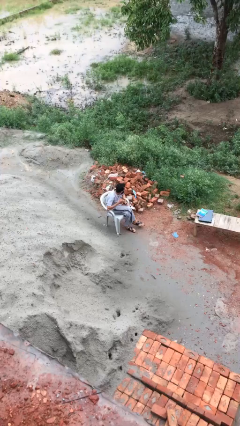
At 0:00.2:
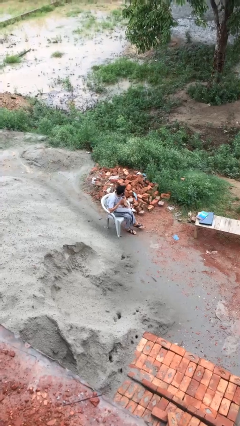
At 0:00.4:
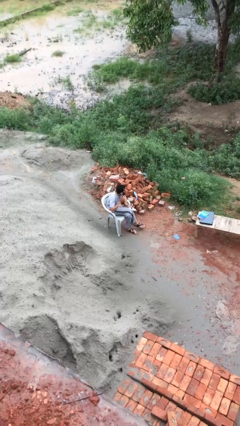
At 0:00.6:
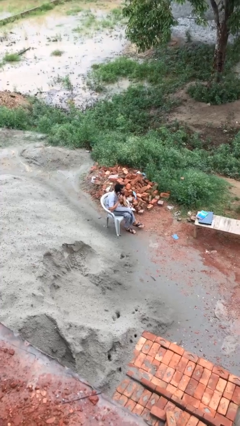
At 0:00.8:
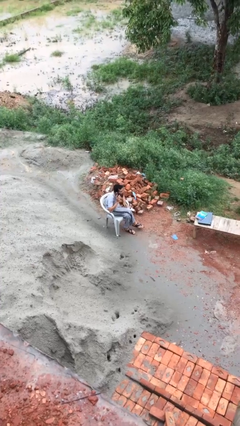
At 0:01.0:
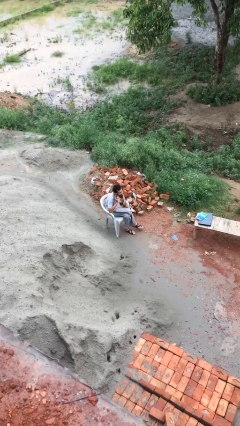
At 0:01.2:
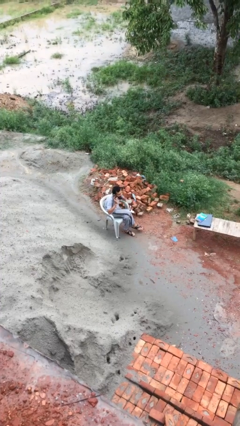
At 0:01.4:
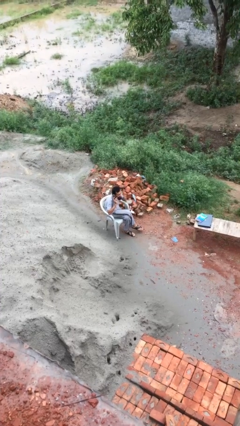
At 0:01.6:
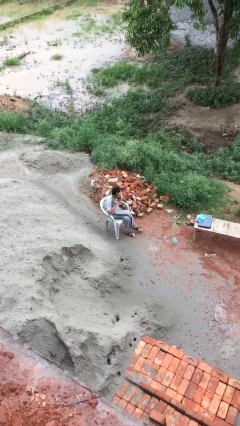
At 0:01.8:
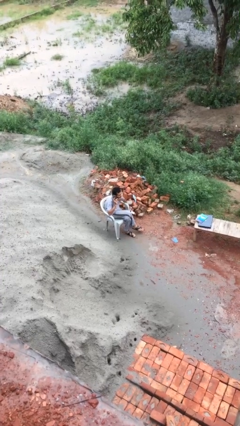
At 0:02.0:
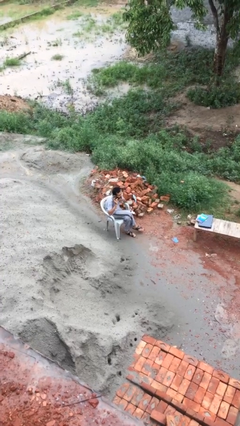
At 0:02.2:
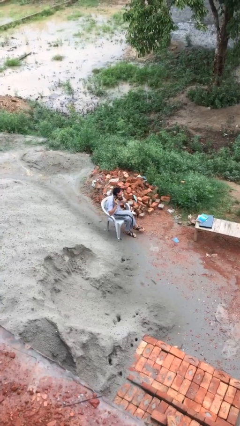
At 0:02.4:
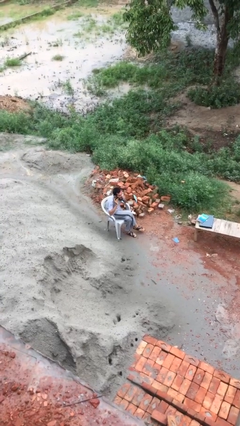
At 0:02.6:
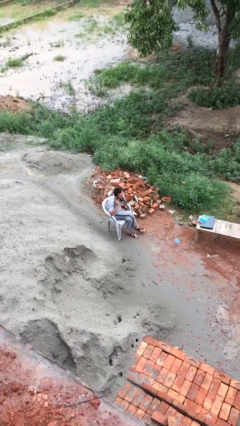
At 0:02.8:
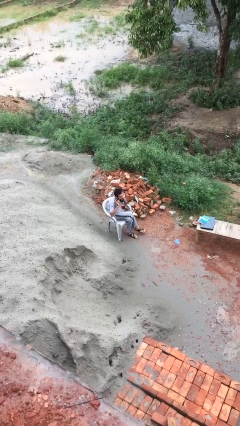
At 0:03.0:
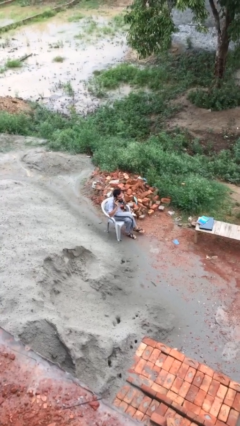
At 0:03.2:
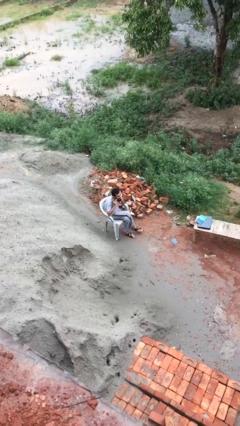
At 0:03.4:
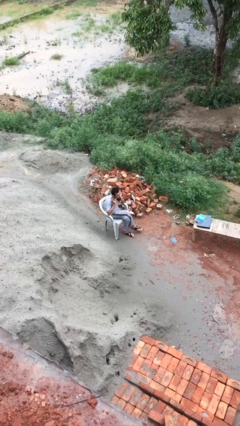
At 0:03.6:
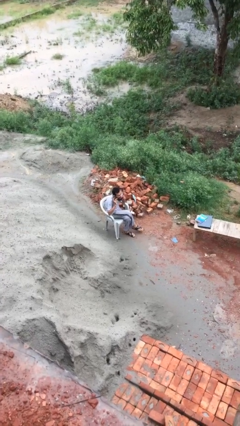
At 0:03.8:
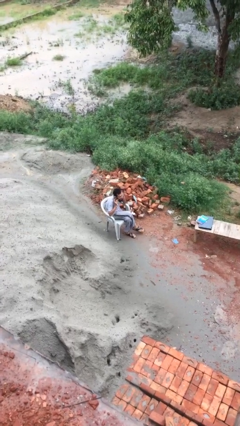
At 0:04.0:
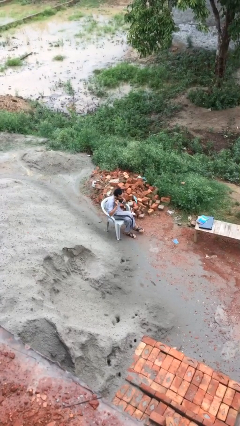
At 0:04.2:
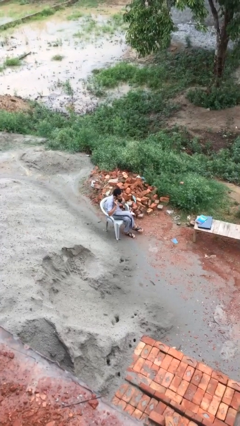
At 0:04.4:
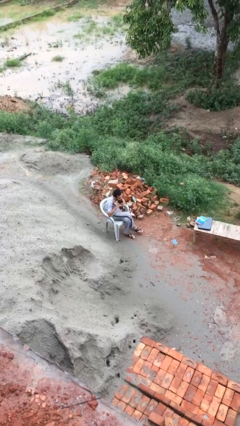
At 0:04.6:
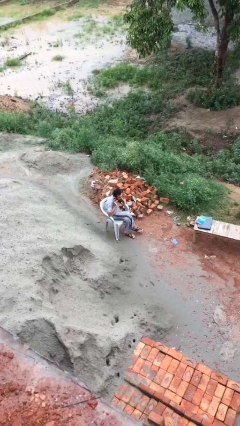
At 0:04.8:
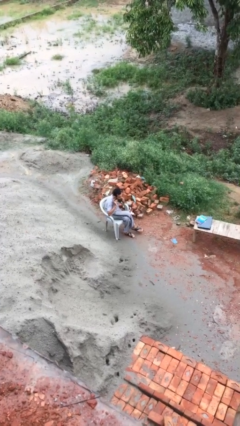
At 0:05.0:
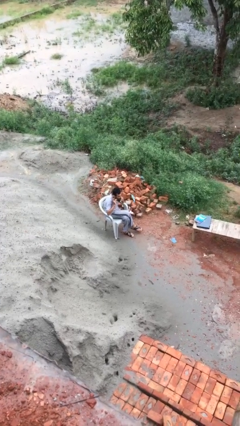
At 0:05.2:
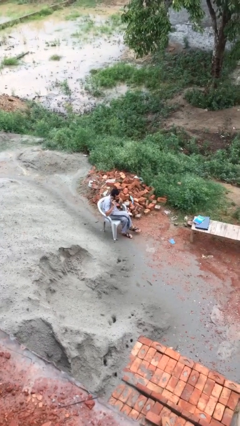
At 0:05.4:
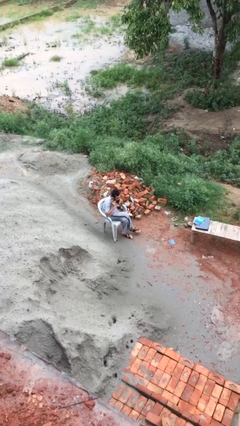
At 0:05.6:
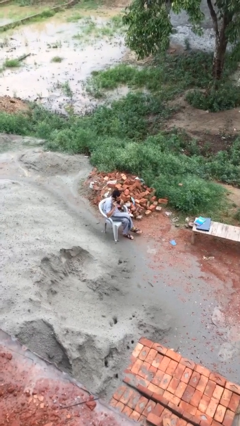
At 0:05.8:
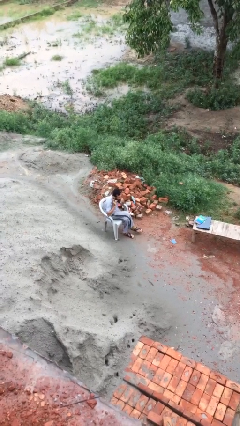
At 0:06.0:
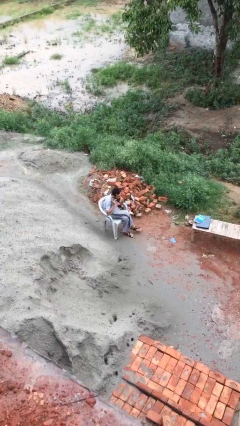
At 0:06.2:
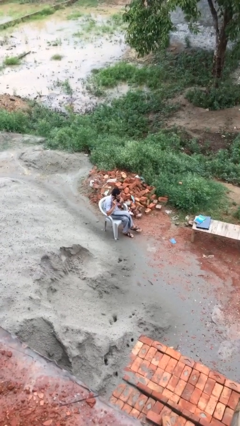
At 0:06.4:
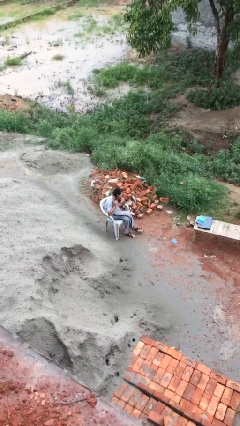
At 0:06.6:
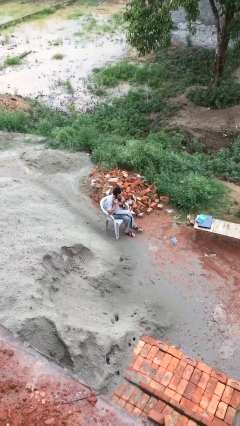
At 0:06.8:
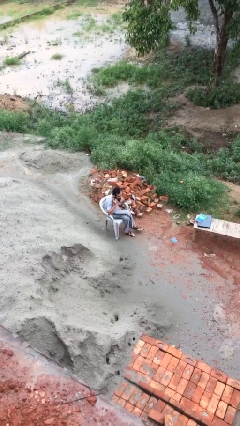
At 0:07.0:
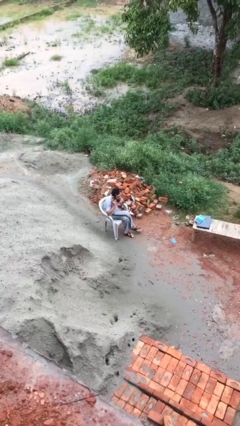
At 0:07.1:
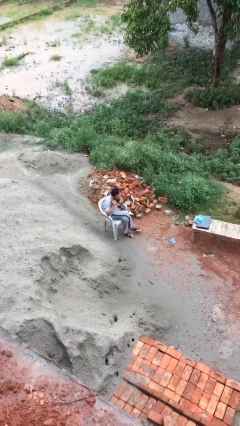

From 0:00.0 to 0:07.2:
person talks on phone

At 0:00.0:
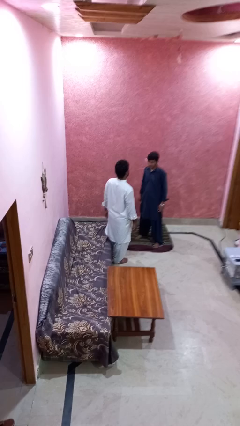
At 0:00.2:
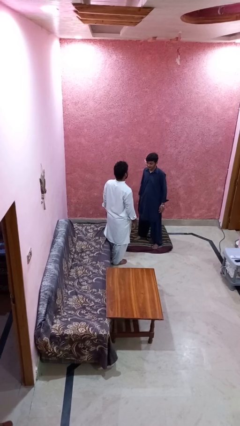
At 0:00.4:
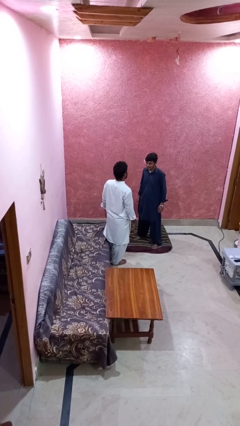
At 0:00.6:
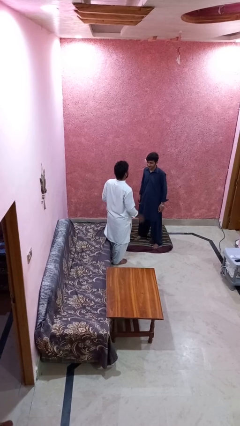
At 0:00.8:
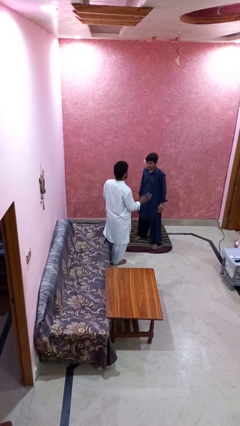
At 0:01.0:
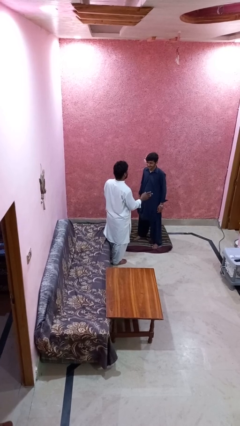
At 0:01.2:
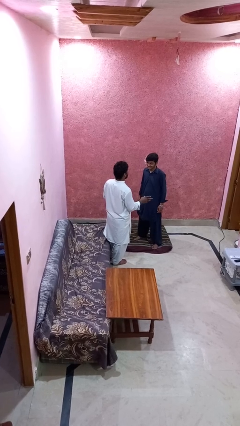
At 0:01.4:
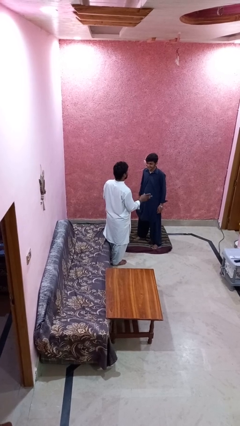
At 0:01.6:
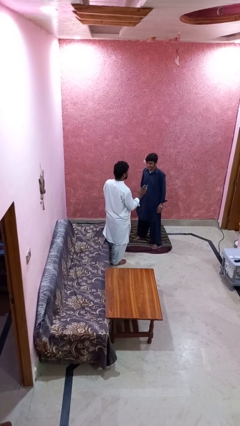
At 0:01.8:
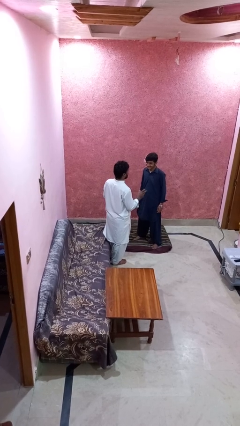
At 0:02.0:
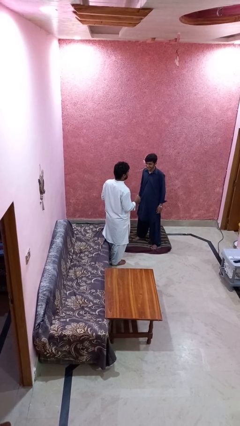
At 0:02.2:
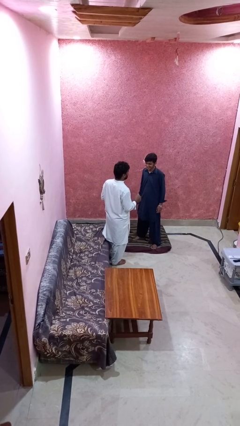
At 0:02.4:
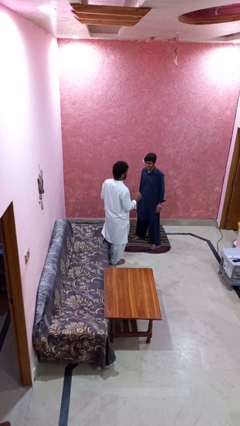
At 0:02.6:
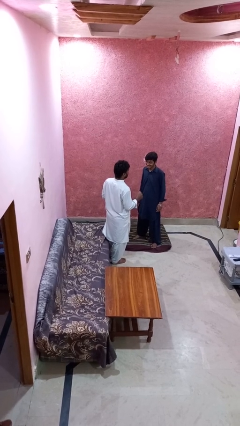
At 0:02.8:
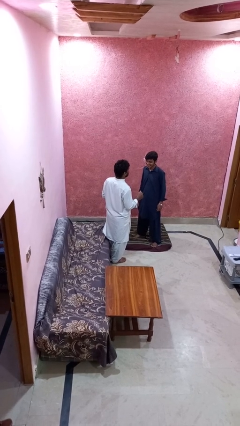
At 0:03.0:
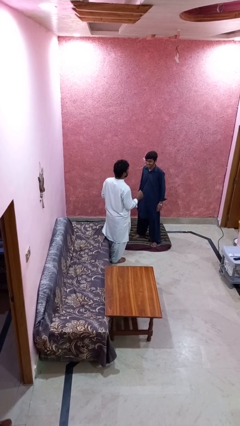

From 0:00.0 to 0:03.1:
person laughs with person

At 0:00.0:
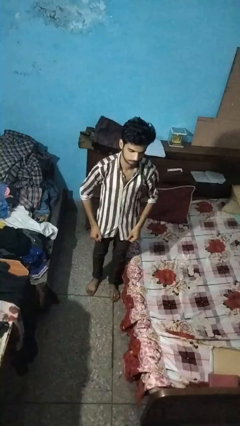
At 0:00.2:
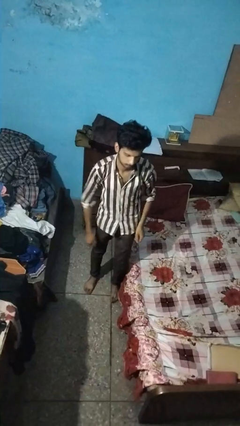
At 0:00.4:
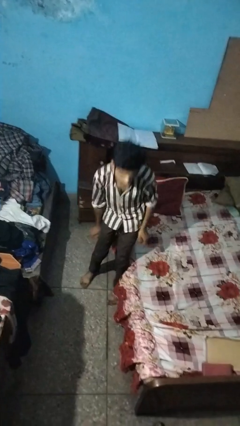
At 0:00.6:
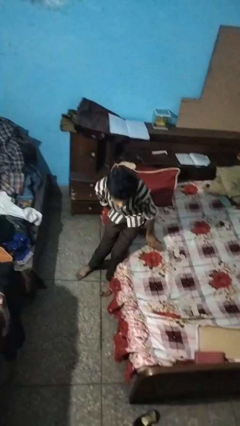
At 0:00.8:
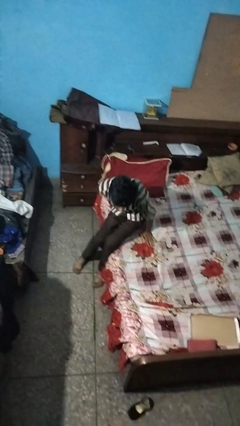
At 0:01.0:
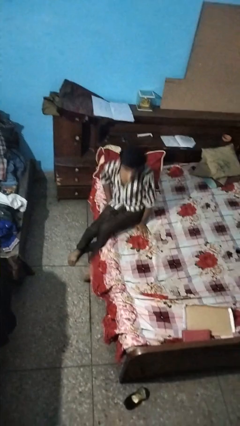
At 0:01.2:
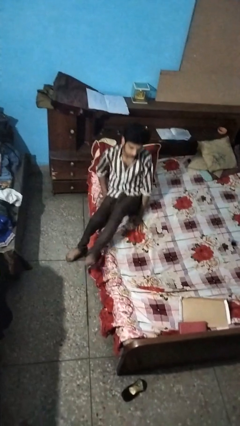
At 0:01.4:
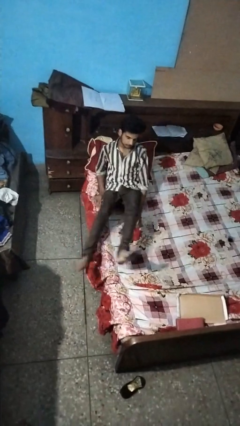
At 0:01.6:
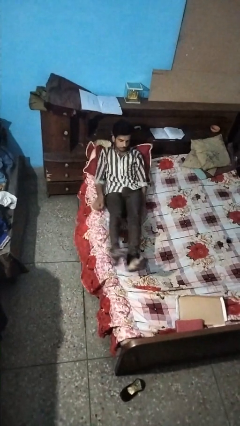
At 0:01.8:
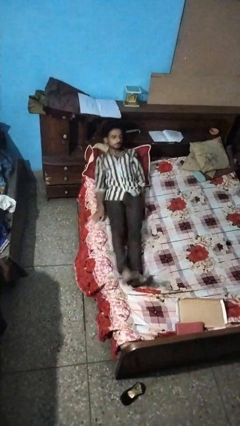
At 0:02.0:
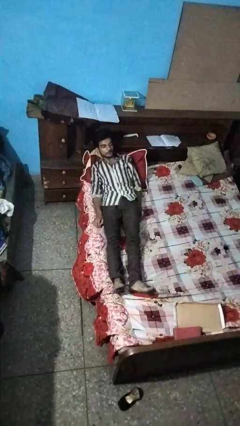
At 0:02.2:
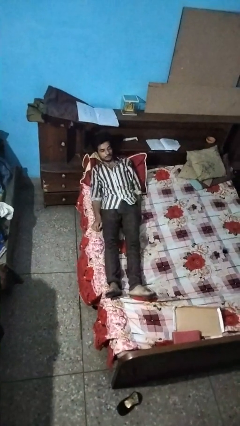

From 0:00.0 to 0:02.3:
person lies down on bed

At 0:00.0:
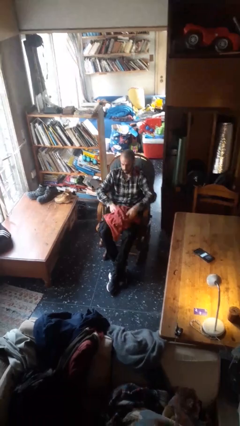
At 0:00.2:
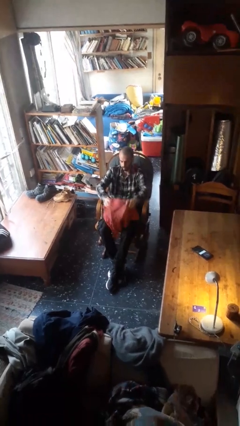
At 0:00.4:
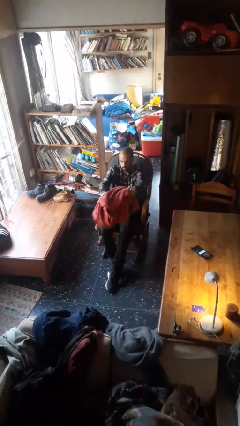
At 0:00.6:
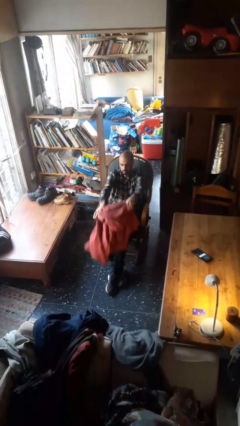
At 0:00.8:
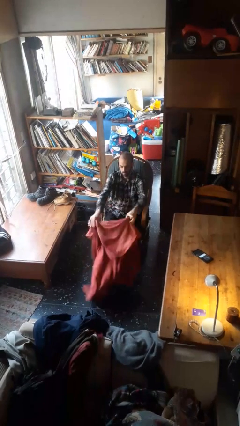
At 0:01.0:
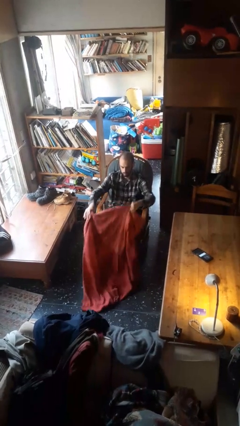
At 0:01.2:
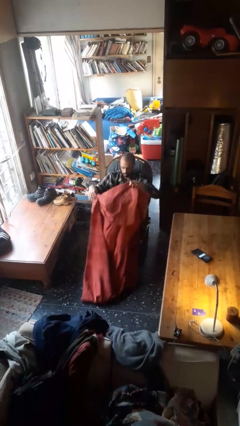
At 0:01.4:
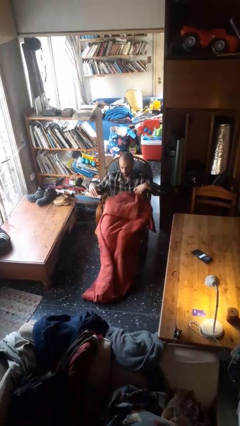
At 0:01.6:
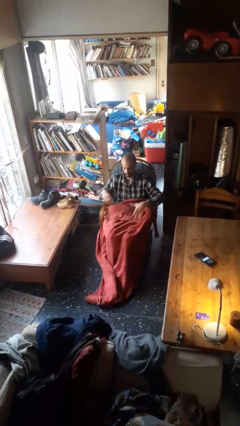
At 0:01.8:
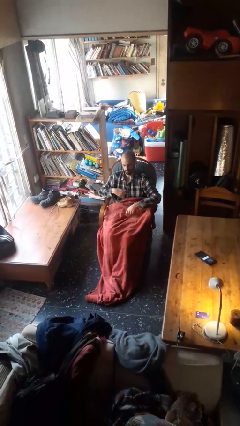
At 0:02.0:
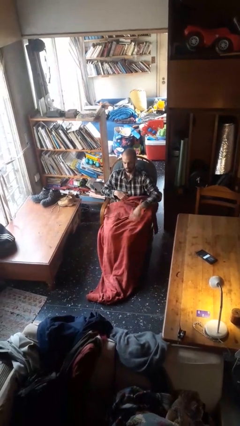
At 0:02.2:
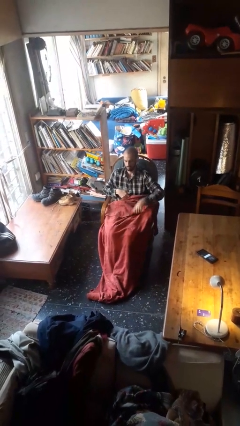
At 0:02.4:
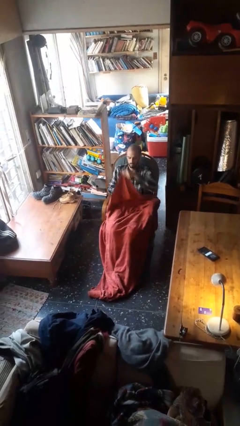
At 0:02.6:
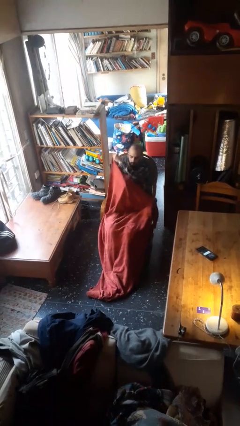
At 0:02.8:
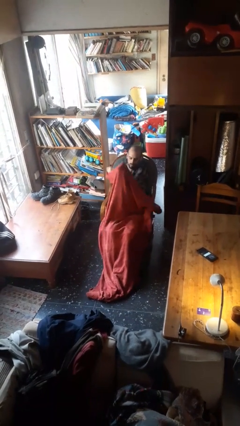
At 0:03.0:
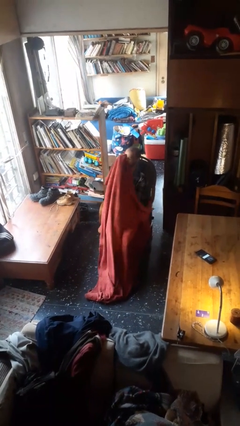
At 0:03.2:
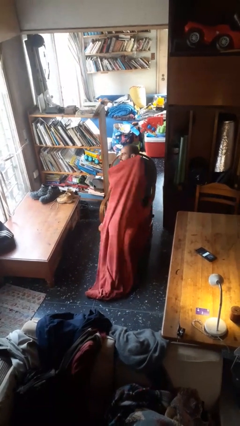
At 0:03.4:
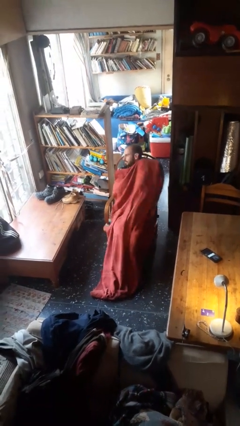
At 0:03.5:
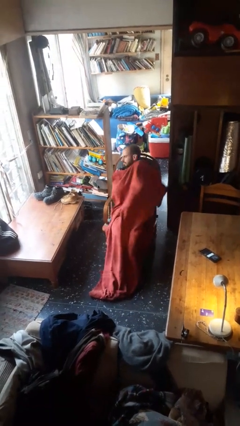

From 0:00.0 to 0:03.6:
person covers with blanket

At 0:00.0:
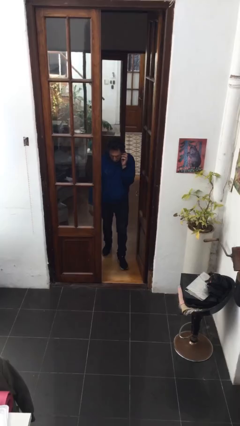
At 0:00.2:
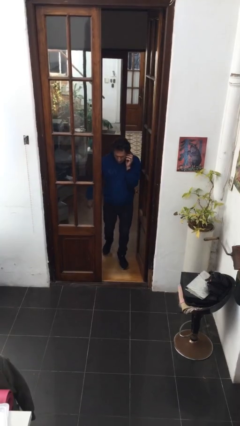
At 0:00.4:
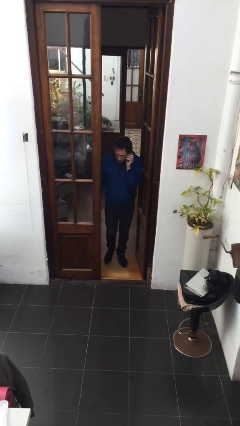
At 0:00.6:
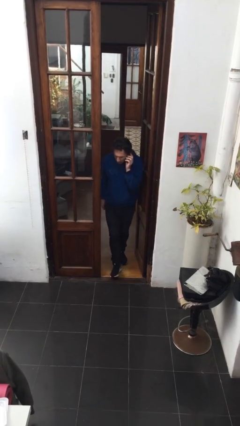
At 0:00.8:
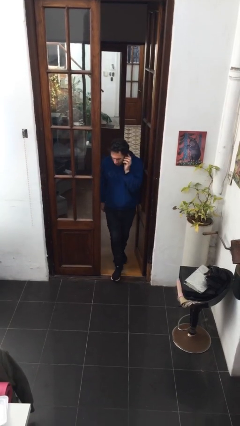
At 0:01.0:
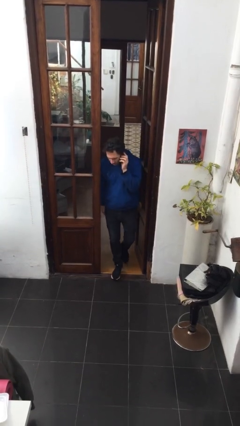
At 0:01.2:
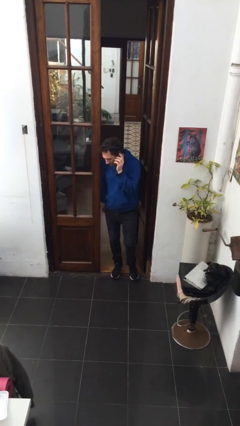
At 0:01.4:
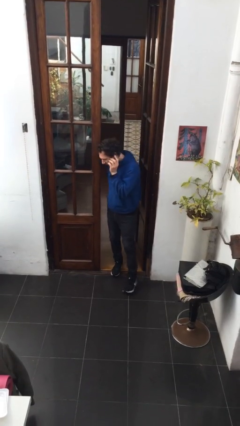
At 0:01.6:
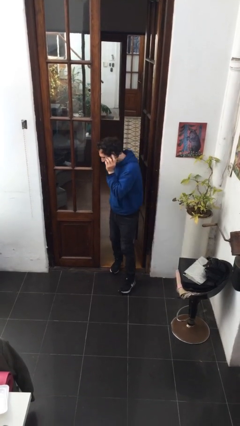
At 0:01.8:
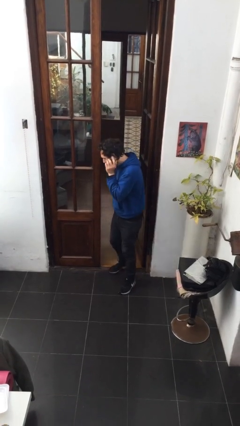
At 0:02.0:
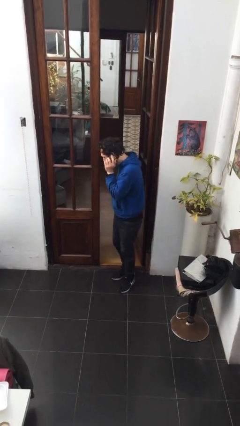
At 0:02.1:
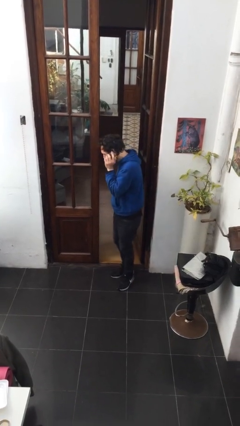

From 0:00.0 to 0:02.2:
person enters scene through structure
